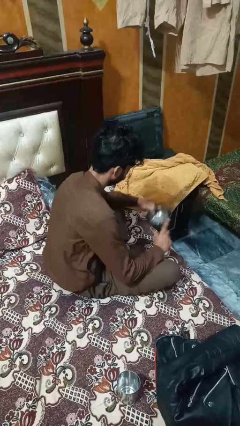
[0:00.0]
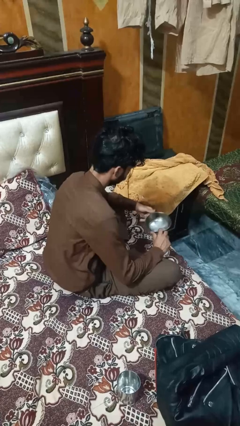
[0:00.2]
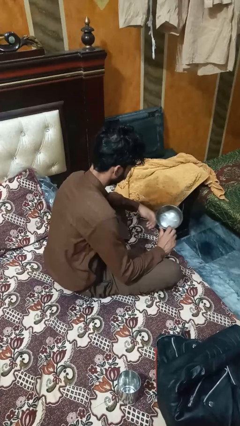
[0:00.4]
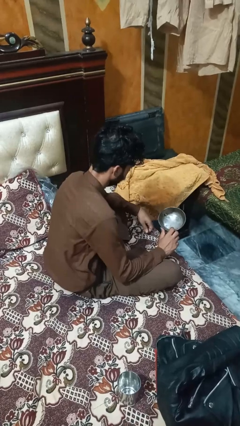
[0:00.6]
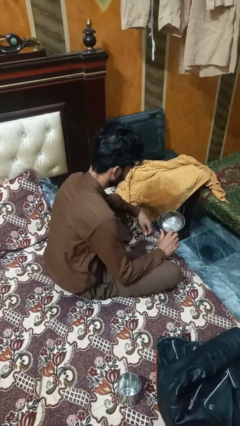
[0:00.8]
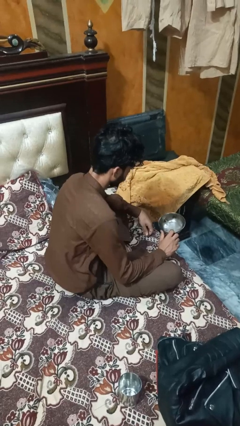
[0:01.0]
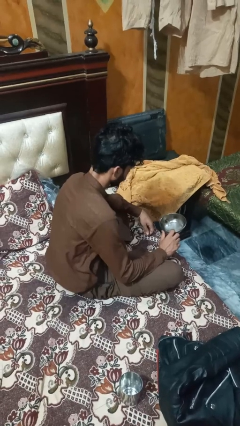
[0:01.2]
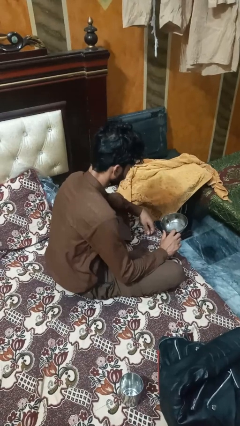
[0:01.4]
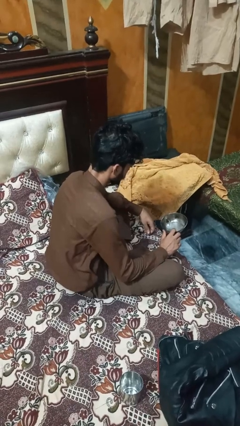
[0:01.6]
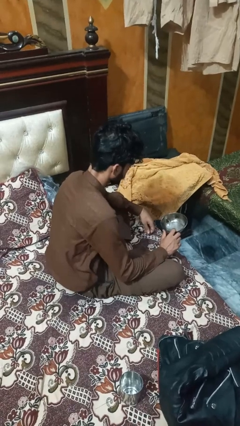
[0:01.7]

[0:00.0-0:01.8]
person picks up object from table

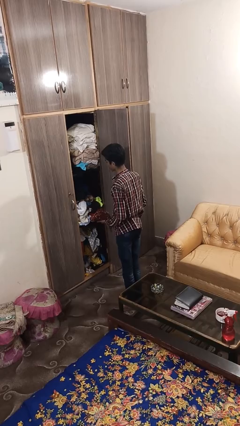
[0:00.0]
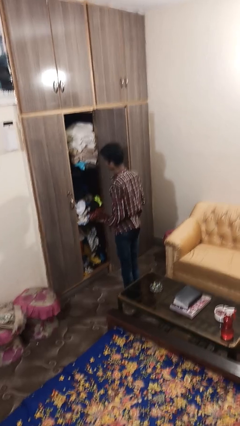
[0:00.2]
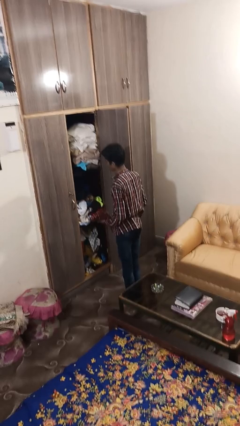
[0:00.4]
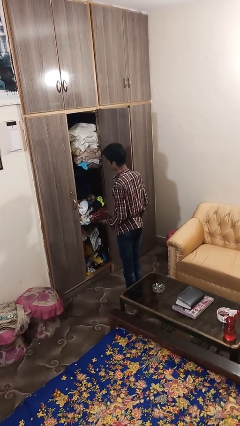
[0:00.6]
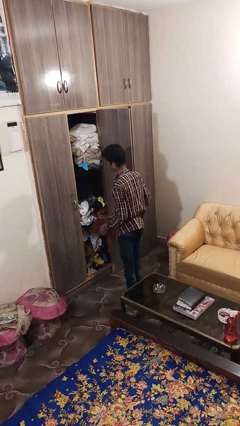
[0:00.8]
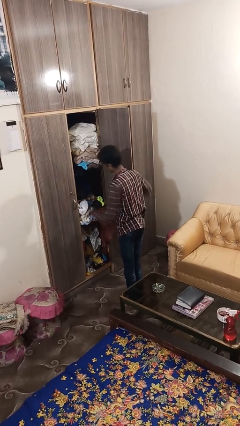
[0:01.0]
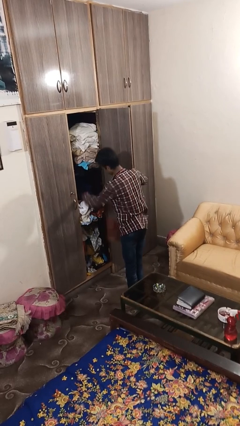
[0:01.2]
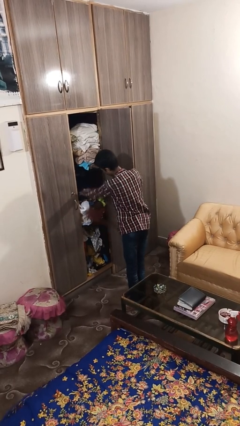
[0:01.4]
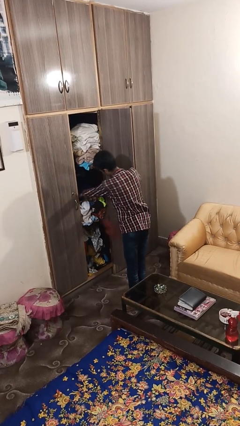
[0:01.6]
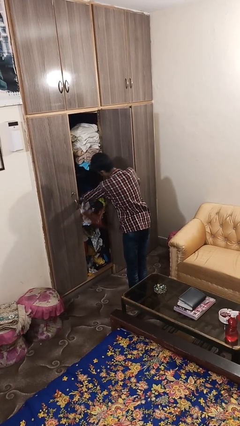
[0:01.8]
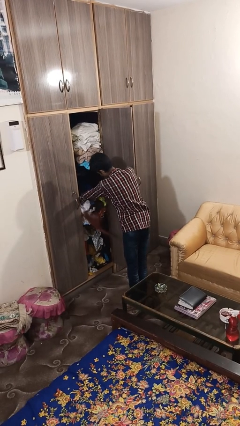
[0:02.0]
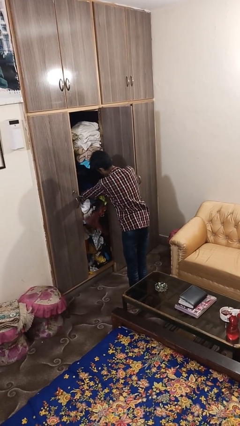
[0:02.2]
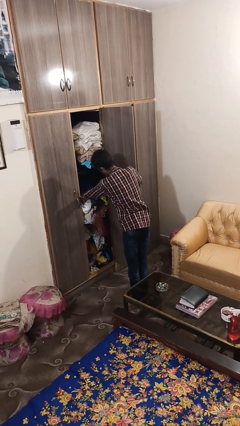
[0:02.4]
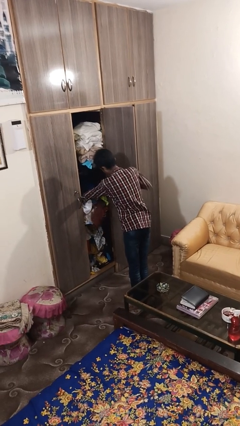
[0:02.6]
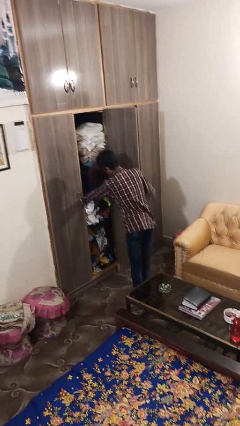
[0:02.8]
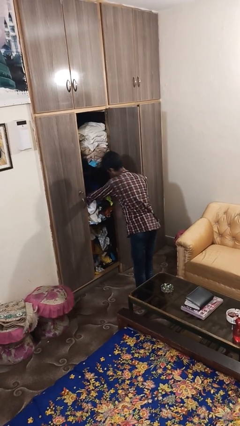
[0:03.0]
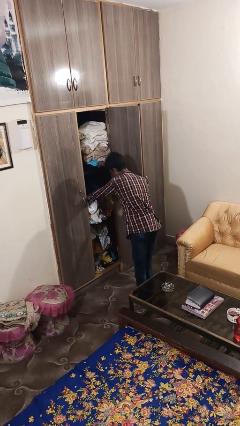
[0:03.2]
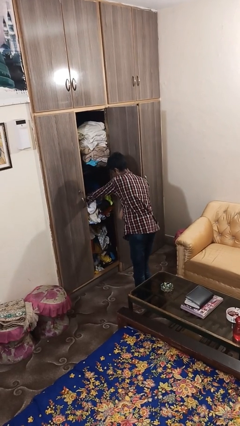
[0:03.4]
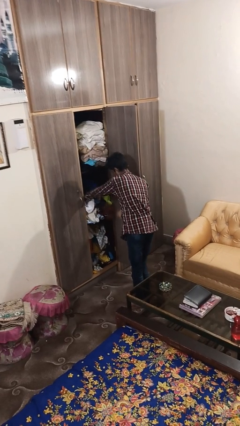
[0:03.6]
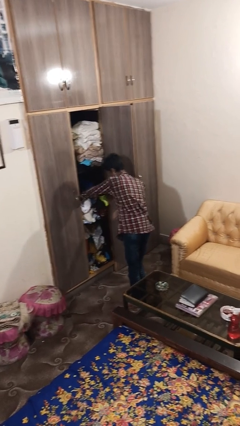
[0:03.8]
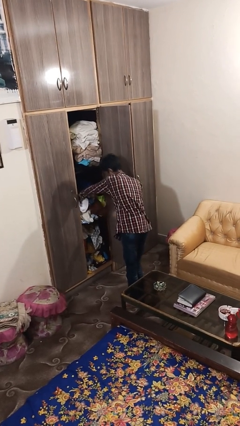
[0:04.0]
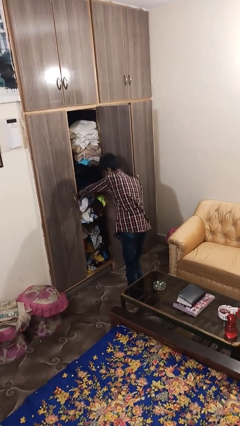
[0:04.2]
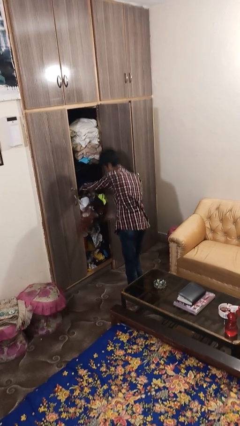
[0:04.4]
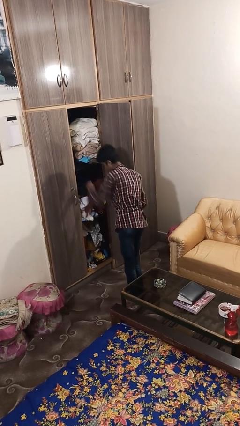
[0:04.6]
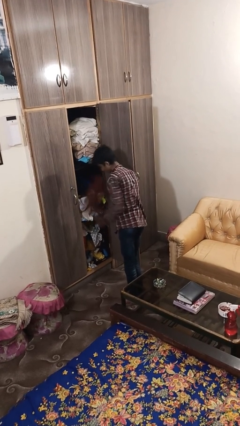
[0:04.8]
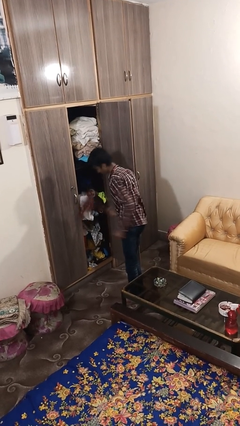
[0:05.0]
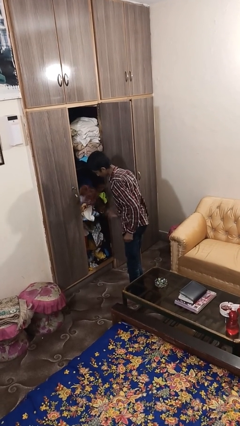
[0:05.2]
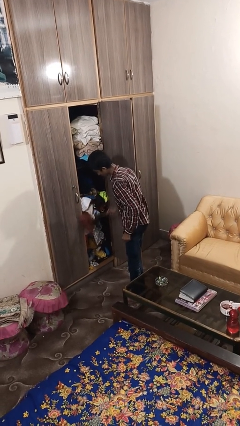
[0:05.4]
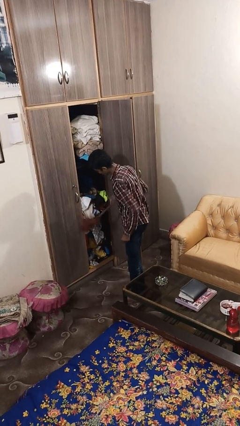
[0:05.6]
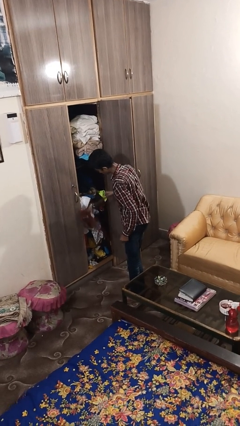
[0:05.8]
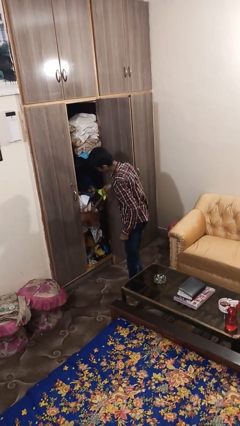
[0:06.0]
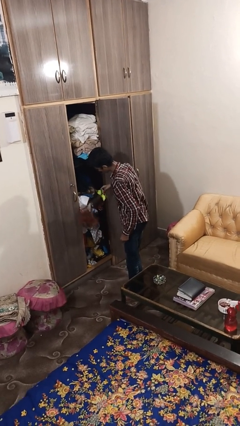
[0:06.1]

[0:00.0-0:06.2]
person dusts furniture

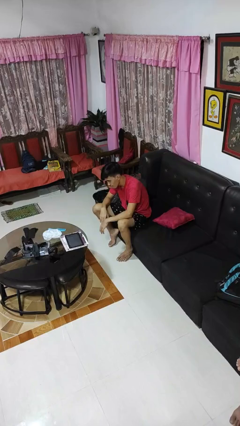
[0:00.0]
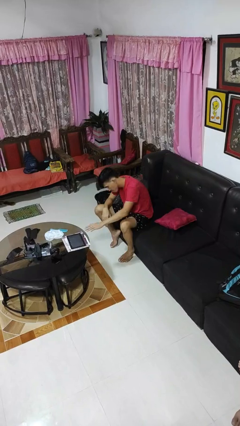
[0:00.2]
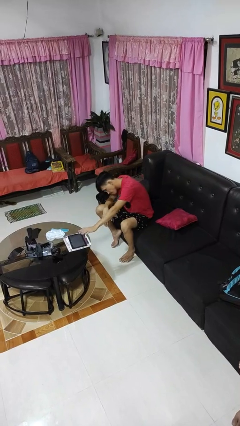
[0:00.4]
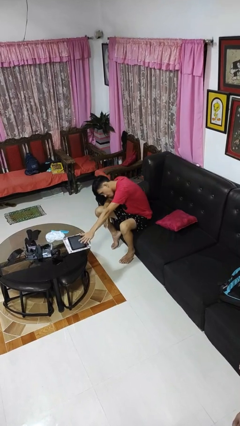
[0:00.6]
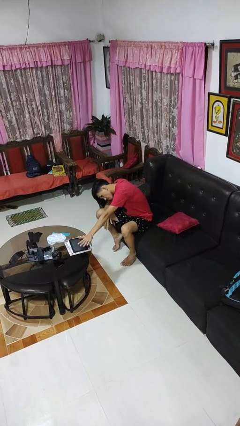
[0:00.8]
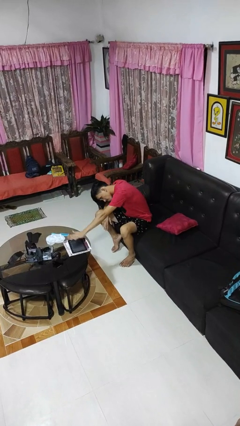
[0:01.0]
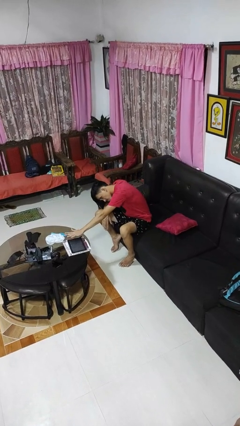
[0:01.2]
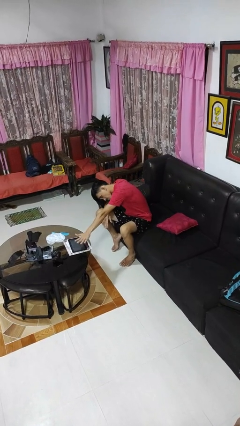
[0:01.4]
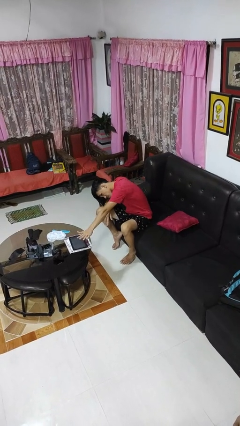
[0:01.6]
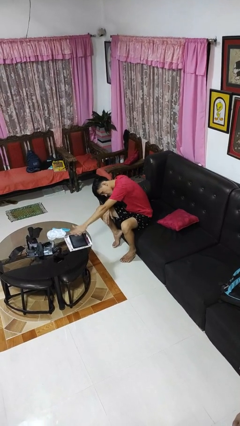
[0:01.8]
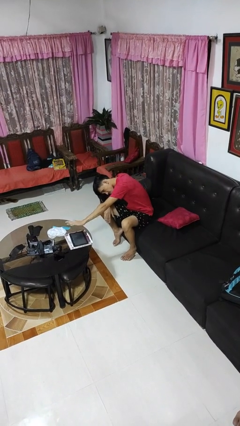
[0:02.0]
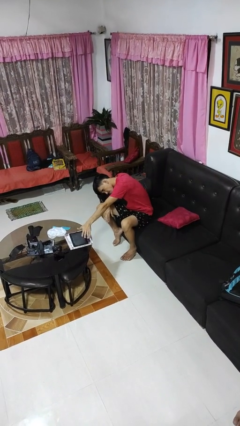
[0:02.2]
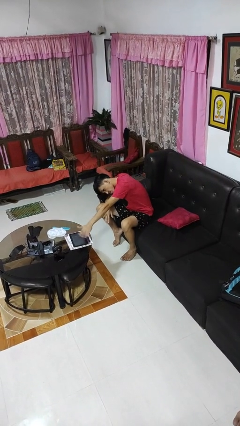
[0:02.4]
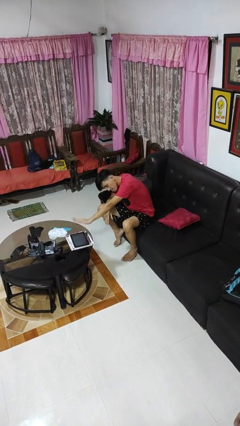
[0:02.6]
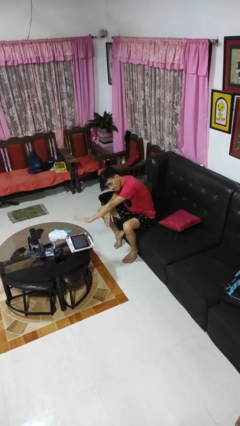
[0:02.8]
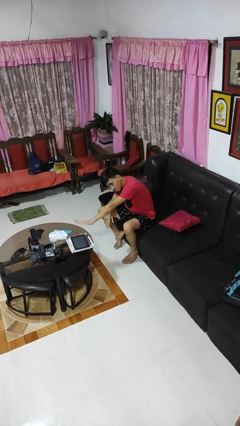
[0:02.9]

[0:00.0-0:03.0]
person waves hand over object

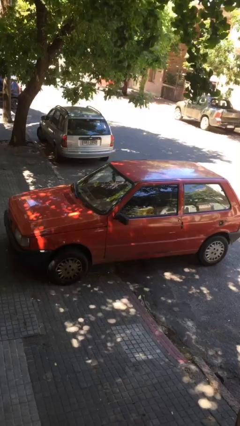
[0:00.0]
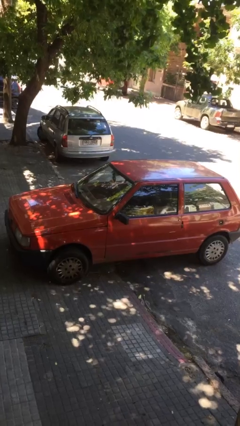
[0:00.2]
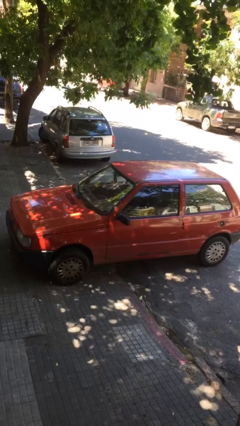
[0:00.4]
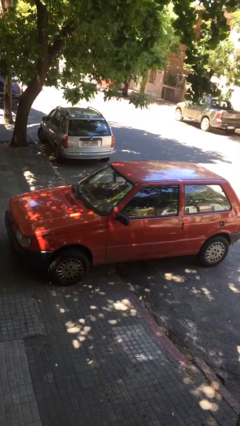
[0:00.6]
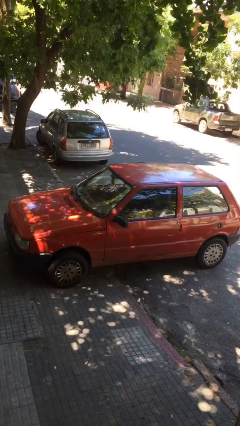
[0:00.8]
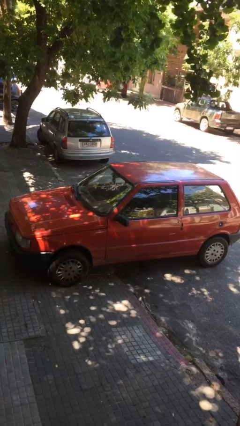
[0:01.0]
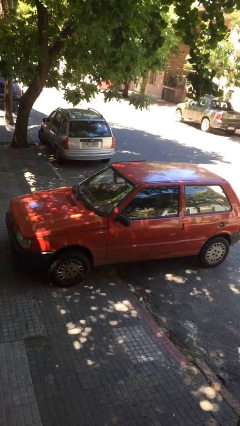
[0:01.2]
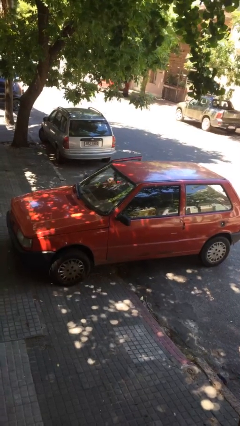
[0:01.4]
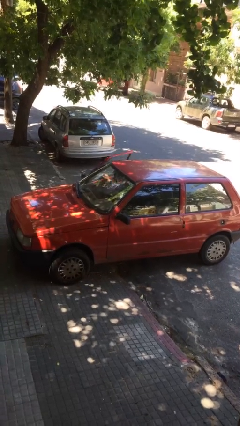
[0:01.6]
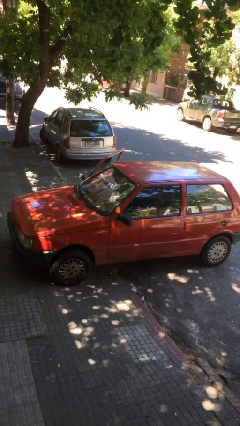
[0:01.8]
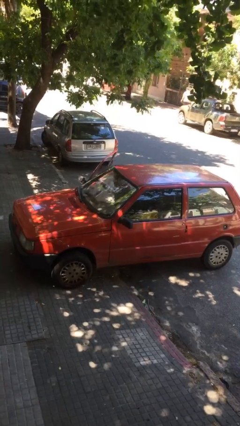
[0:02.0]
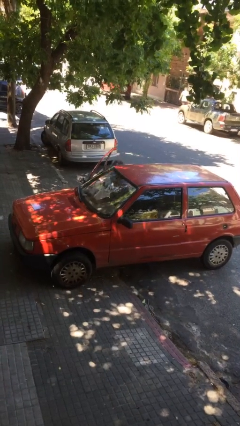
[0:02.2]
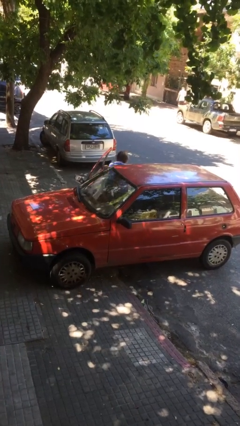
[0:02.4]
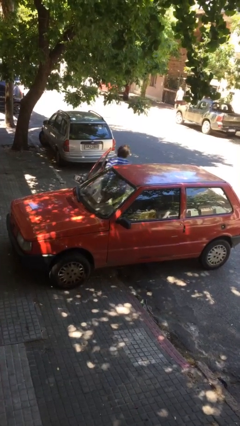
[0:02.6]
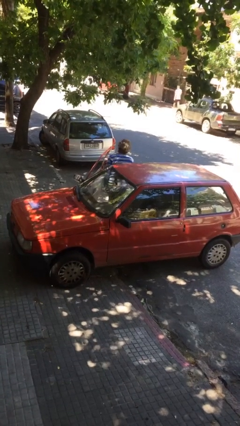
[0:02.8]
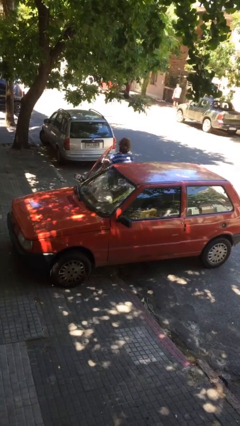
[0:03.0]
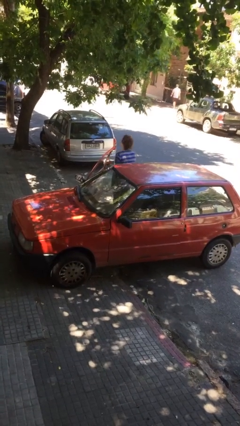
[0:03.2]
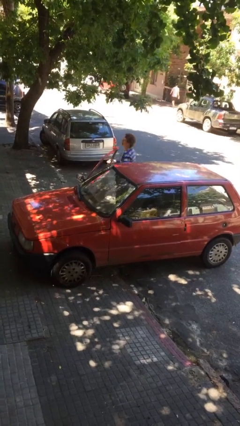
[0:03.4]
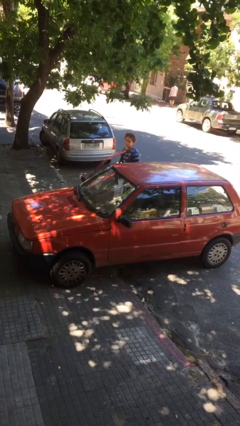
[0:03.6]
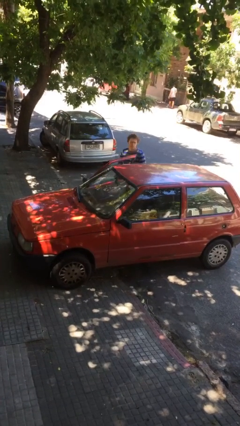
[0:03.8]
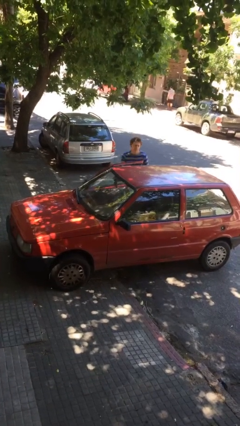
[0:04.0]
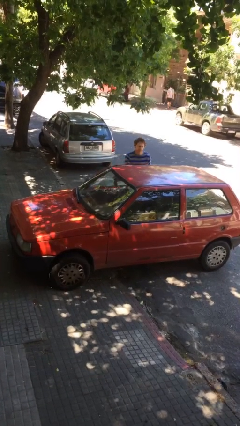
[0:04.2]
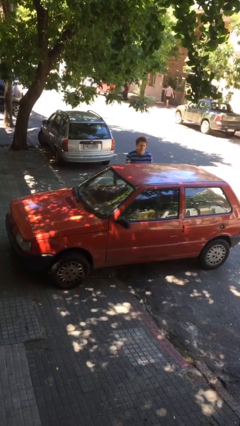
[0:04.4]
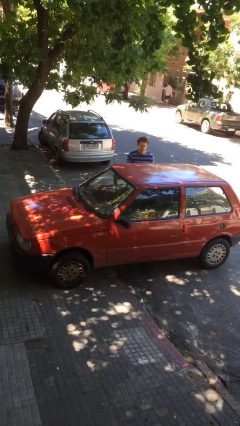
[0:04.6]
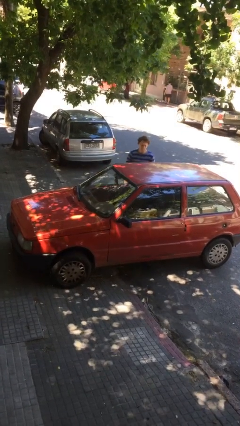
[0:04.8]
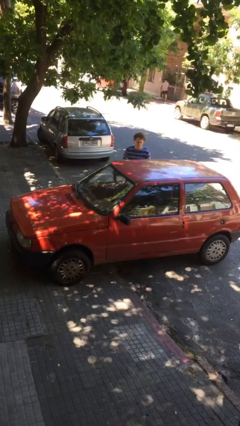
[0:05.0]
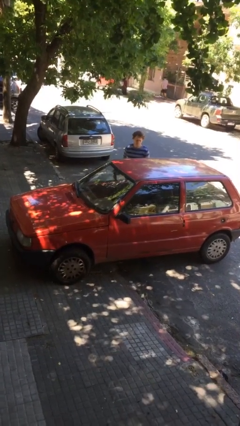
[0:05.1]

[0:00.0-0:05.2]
car drops off person

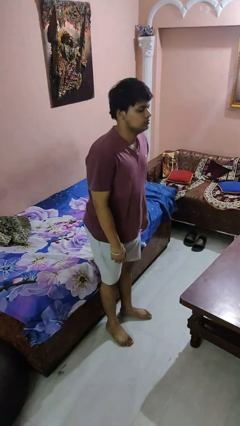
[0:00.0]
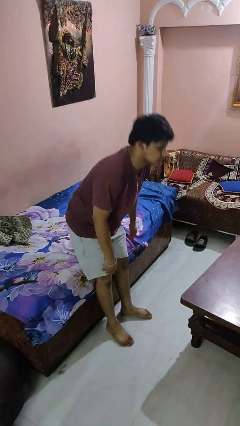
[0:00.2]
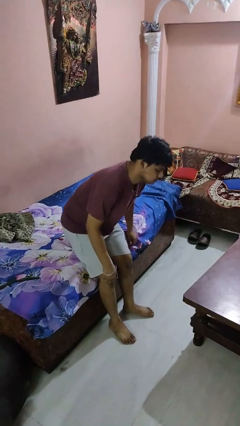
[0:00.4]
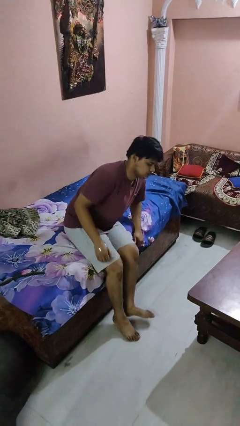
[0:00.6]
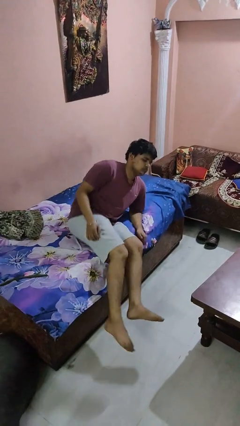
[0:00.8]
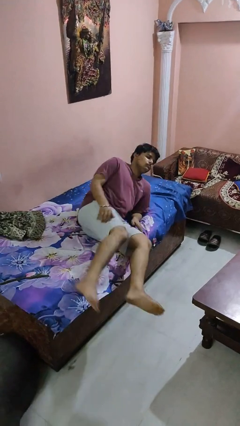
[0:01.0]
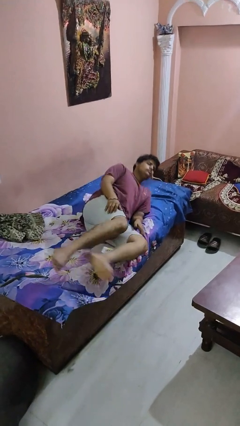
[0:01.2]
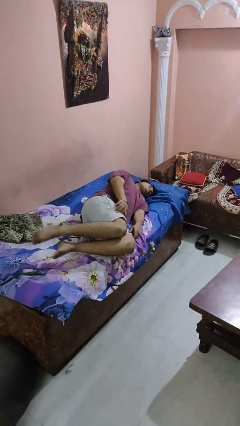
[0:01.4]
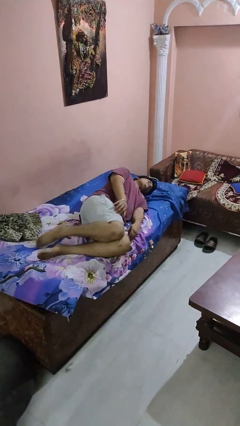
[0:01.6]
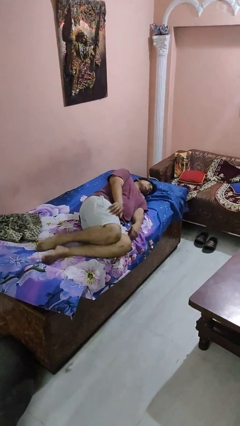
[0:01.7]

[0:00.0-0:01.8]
person lies down on bed
